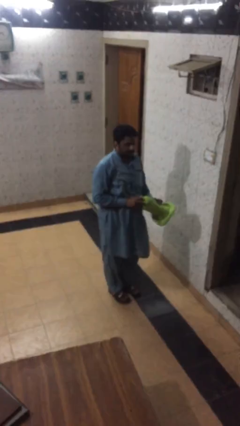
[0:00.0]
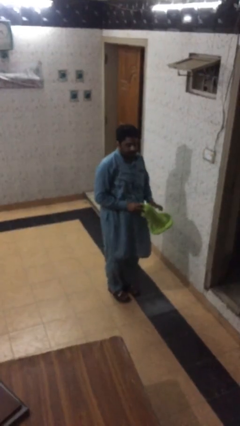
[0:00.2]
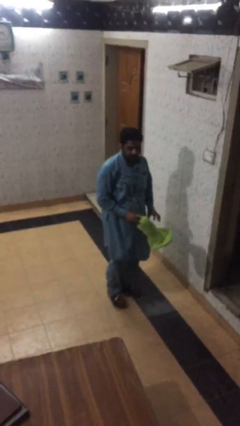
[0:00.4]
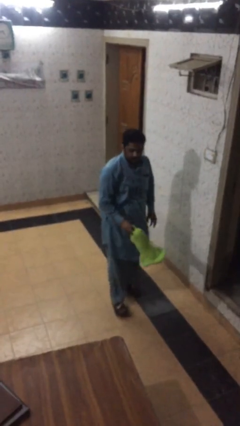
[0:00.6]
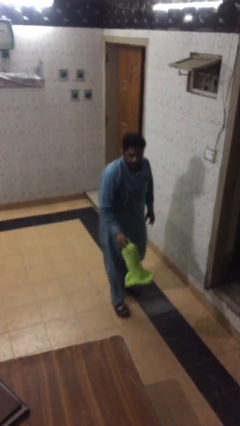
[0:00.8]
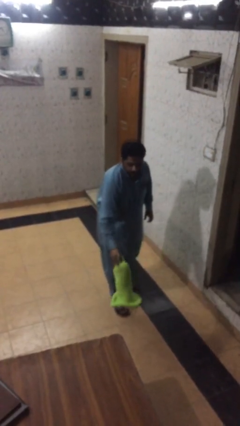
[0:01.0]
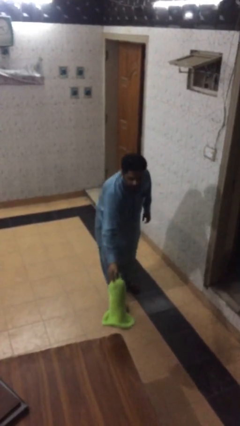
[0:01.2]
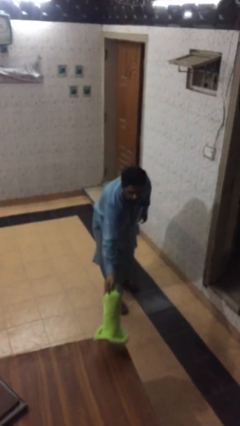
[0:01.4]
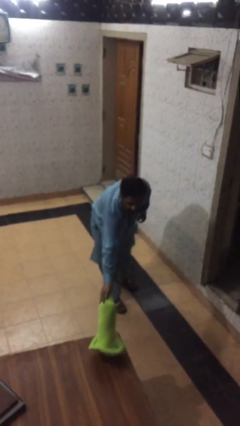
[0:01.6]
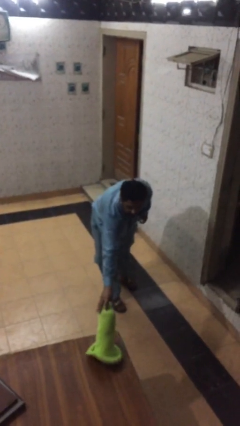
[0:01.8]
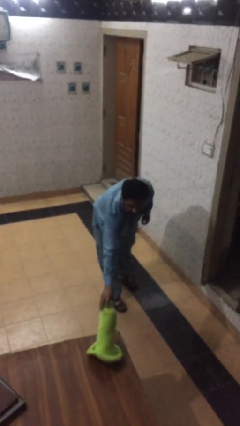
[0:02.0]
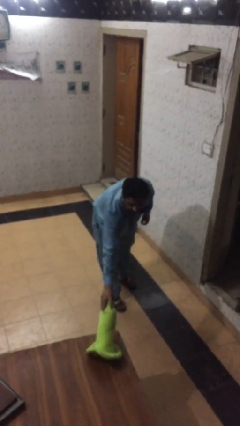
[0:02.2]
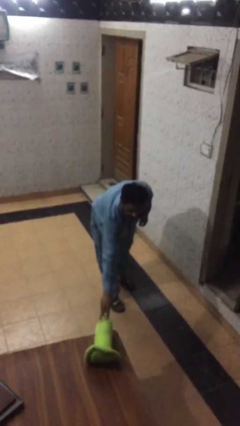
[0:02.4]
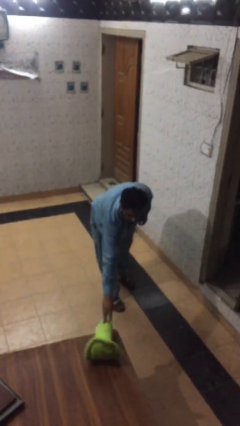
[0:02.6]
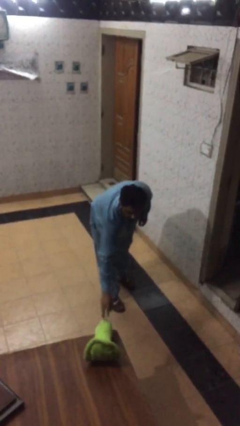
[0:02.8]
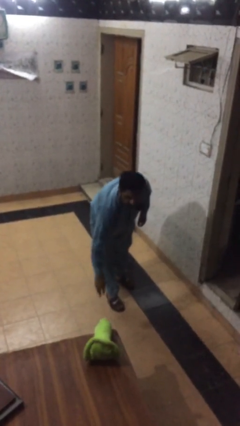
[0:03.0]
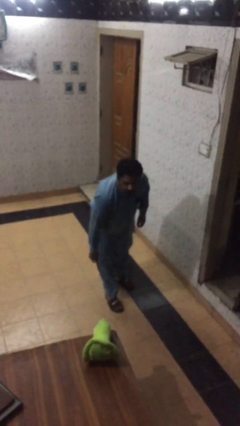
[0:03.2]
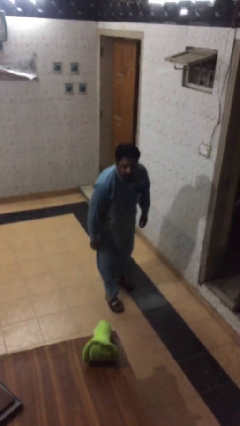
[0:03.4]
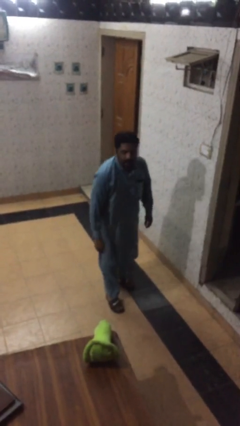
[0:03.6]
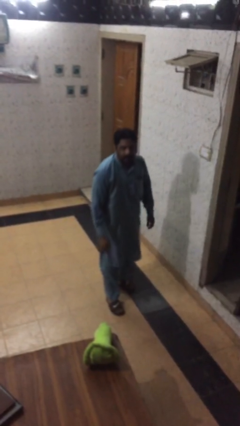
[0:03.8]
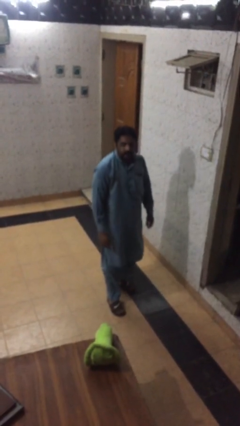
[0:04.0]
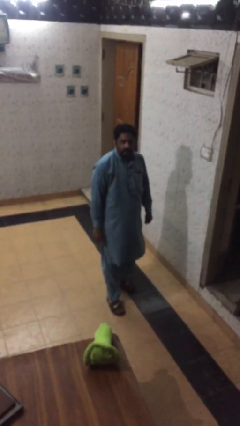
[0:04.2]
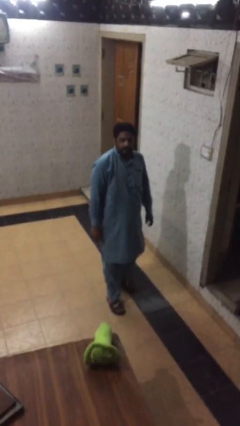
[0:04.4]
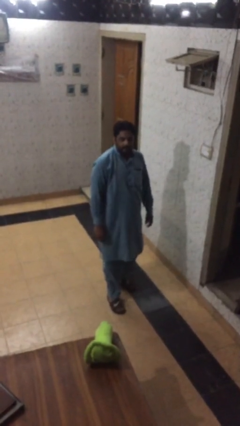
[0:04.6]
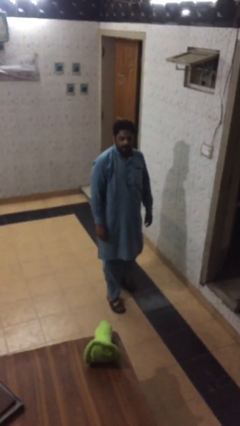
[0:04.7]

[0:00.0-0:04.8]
person puts down object on table

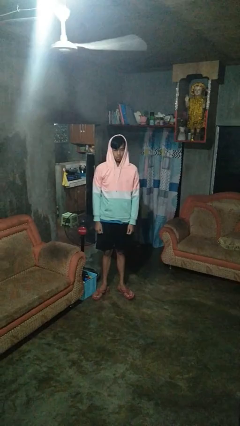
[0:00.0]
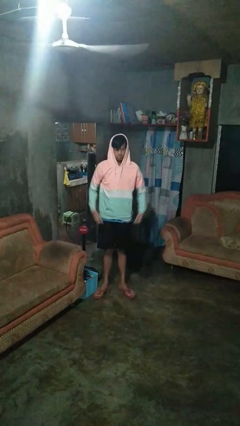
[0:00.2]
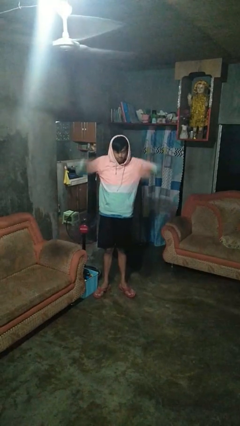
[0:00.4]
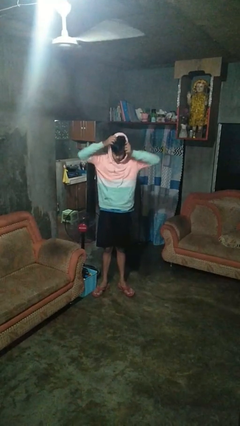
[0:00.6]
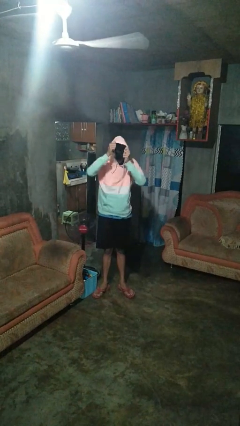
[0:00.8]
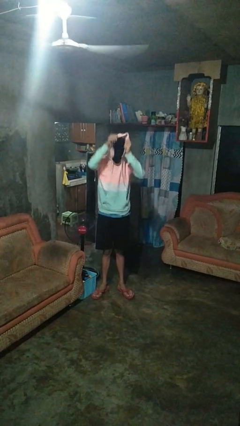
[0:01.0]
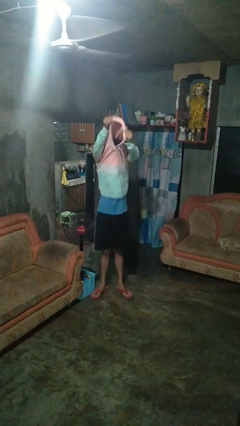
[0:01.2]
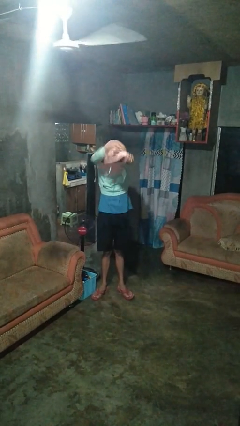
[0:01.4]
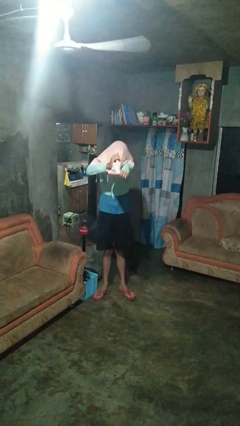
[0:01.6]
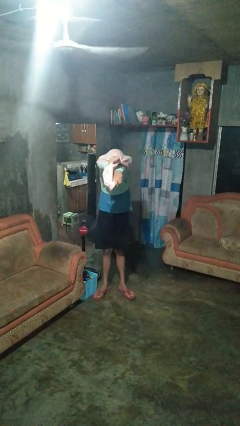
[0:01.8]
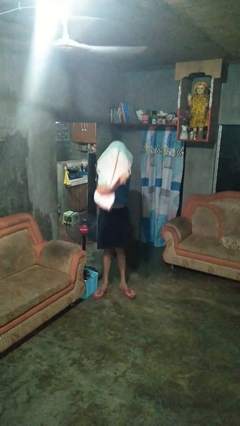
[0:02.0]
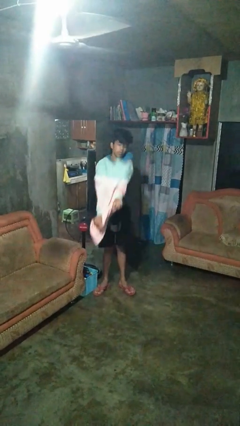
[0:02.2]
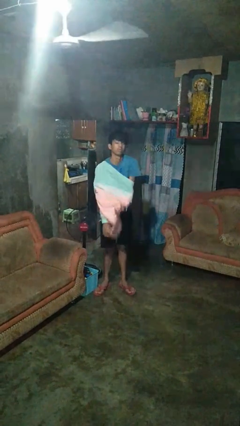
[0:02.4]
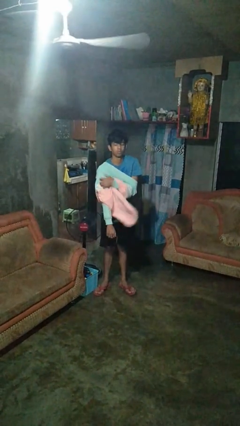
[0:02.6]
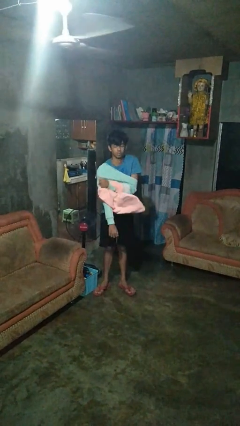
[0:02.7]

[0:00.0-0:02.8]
person takes off hoodie

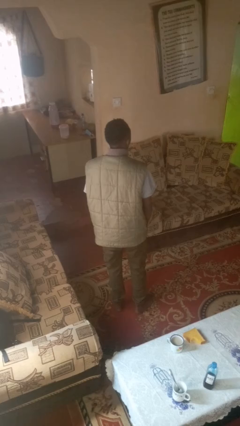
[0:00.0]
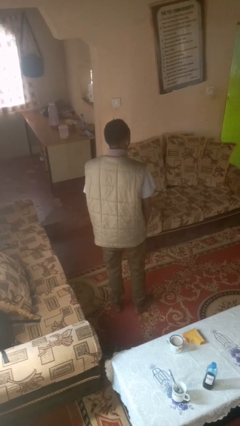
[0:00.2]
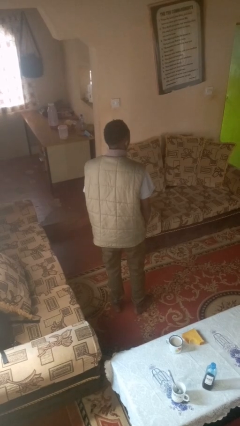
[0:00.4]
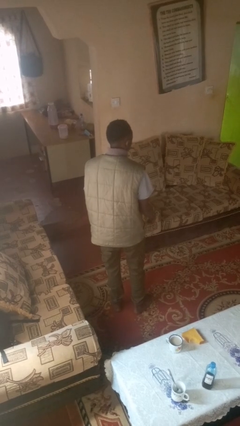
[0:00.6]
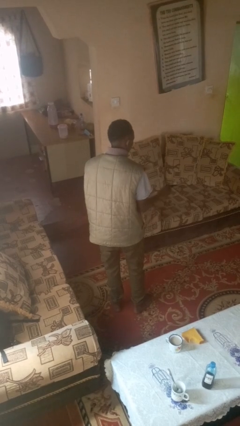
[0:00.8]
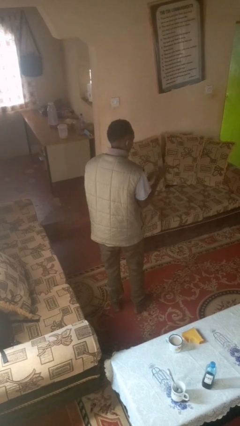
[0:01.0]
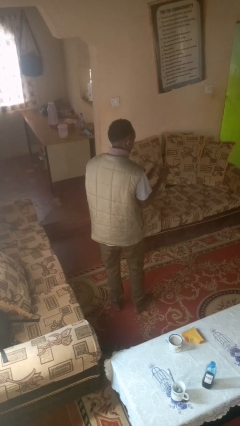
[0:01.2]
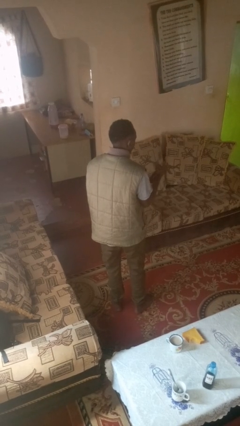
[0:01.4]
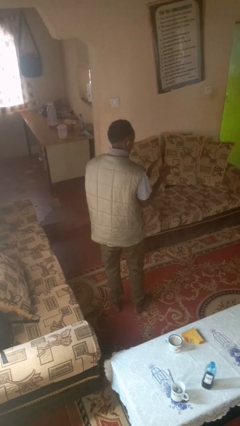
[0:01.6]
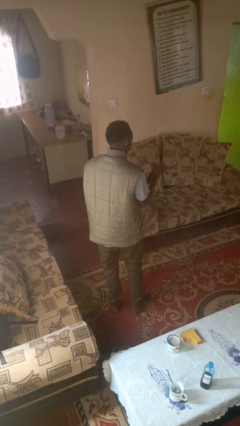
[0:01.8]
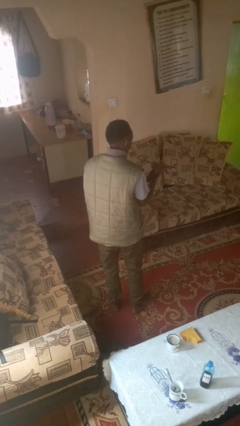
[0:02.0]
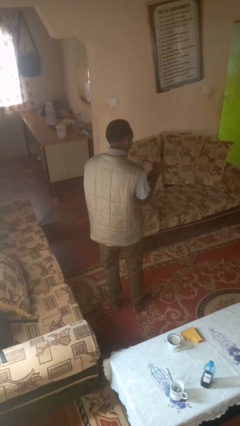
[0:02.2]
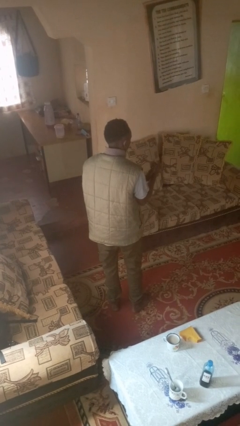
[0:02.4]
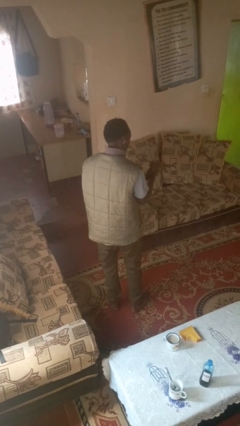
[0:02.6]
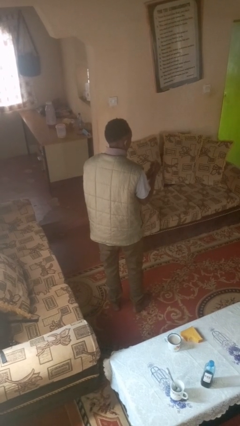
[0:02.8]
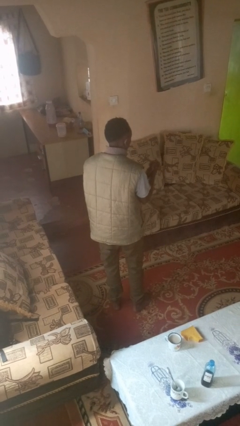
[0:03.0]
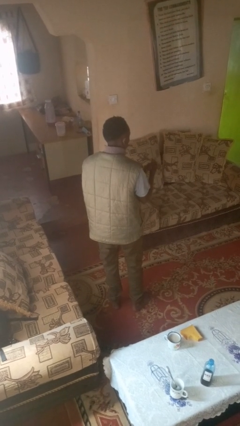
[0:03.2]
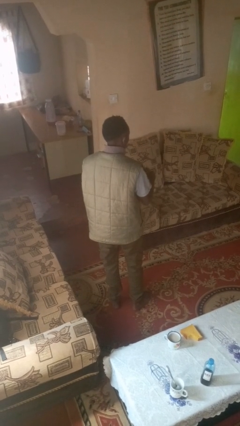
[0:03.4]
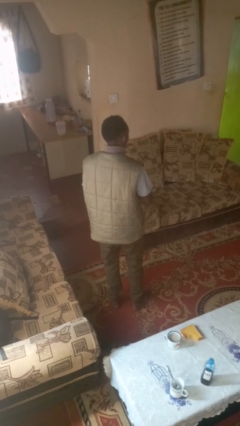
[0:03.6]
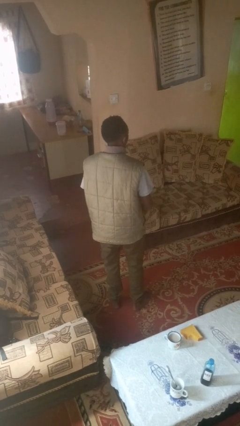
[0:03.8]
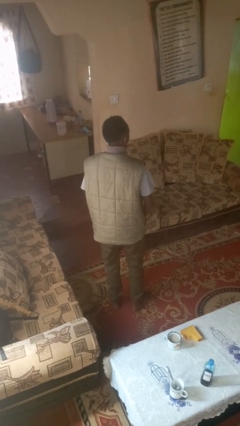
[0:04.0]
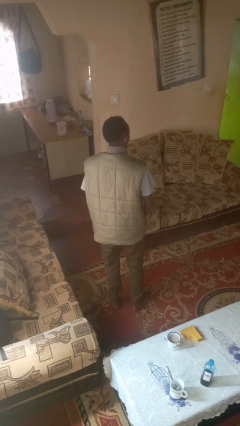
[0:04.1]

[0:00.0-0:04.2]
person claps hands

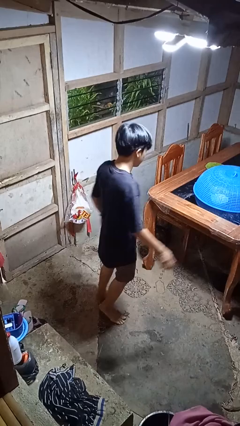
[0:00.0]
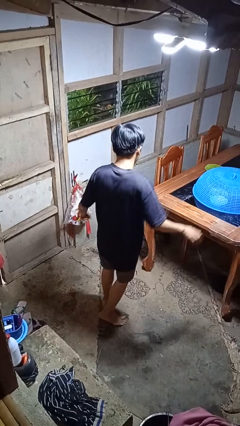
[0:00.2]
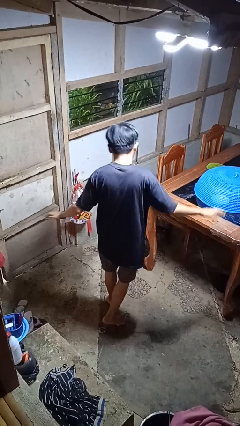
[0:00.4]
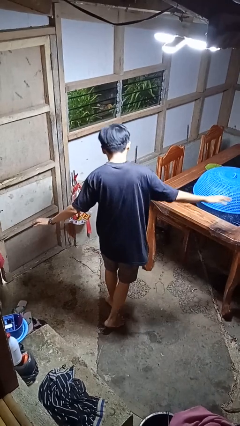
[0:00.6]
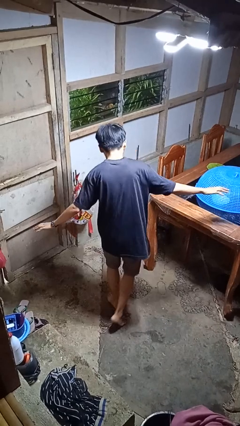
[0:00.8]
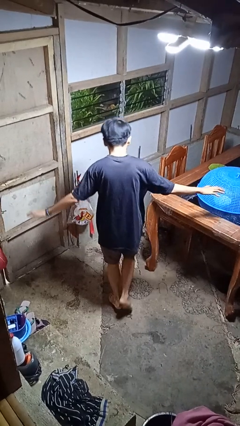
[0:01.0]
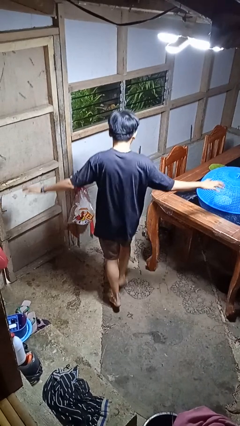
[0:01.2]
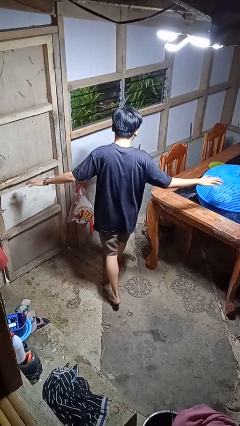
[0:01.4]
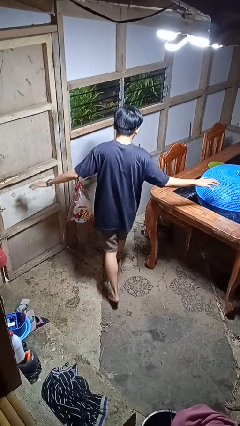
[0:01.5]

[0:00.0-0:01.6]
person walks tiptoe

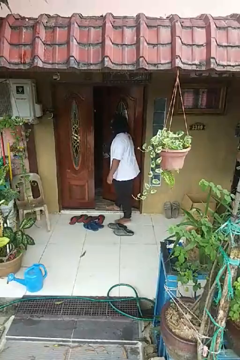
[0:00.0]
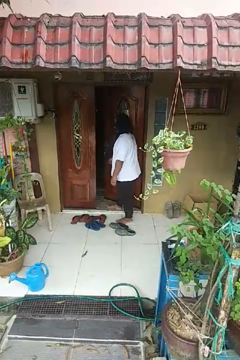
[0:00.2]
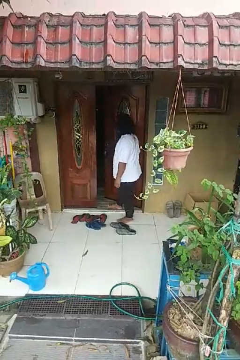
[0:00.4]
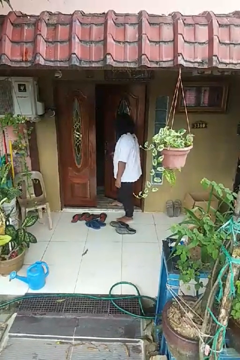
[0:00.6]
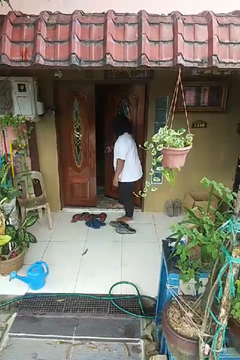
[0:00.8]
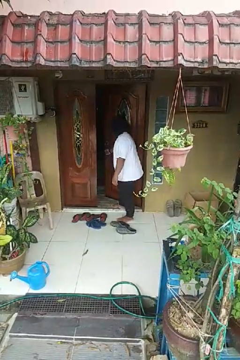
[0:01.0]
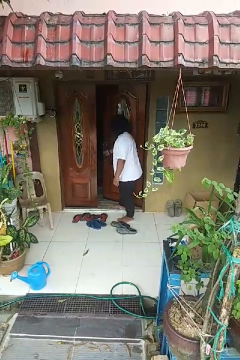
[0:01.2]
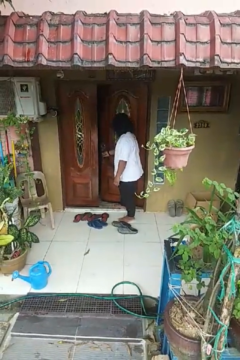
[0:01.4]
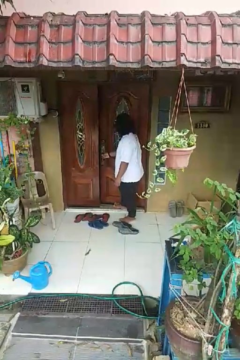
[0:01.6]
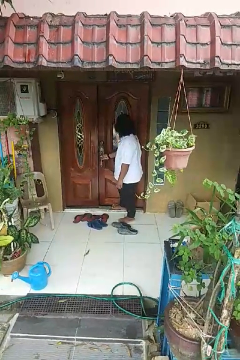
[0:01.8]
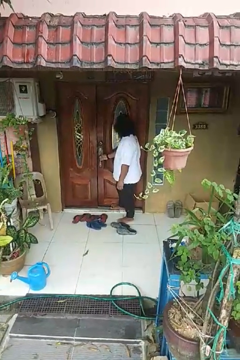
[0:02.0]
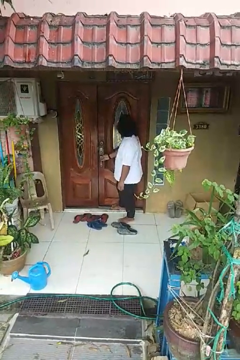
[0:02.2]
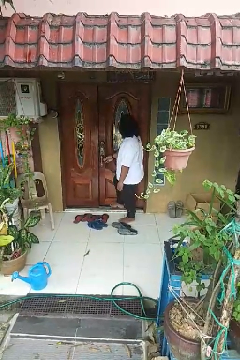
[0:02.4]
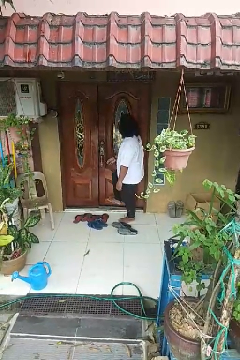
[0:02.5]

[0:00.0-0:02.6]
person closes door with foot

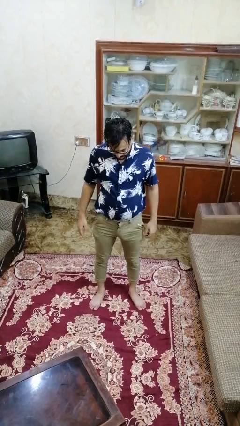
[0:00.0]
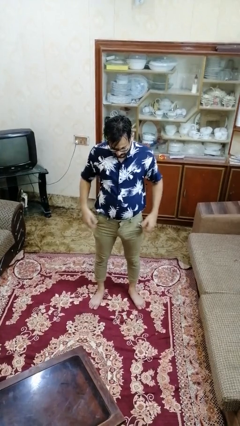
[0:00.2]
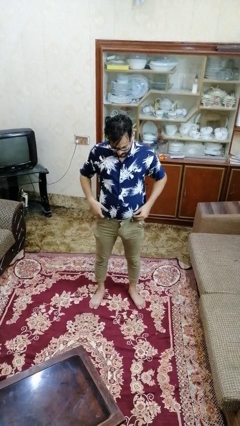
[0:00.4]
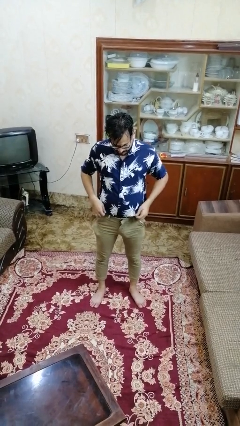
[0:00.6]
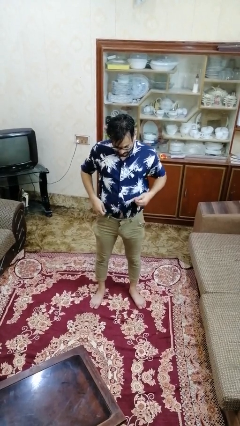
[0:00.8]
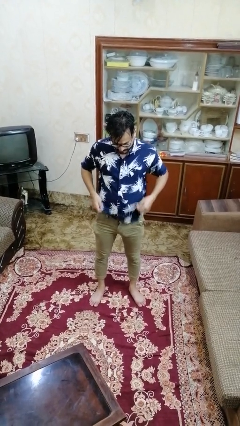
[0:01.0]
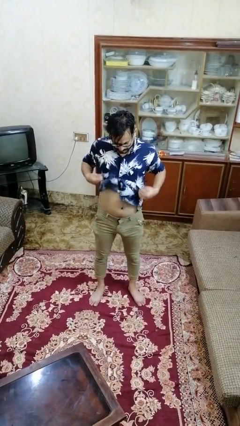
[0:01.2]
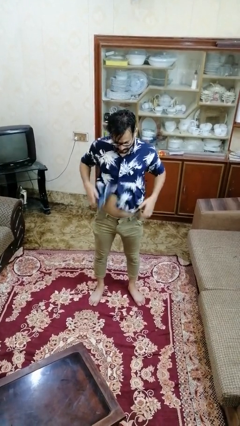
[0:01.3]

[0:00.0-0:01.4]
person untucks shirt

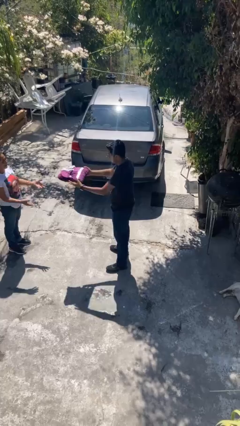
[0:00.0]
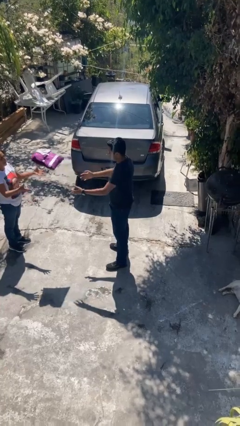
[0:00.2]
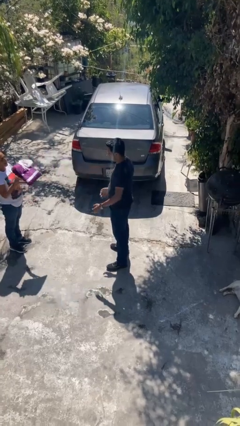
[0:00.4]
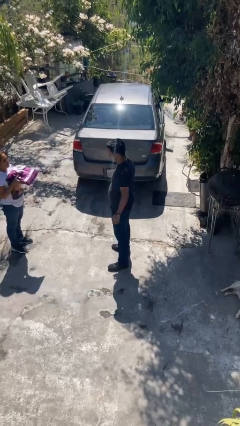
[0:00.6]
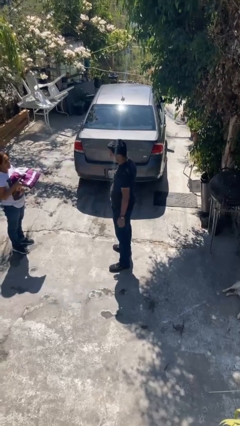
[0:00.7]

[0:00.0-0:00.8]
person throws object to person
